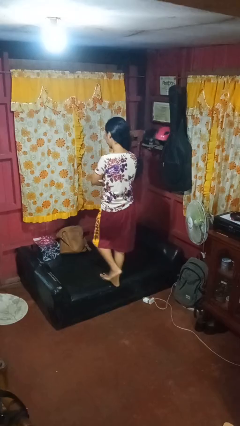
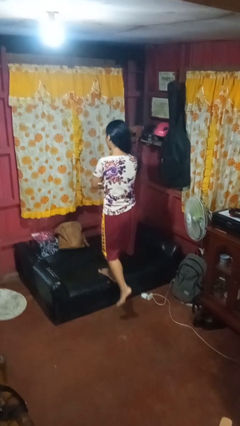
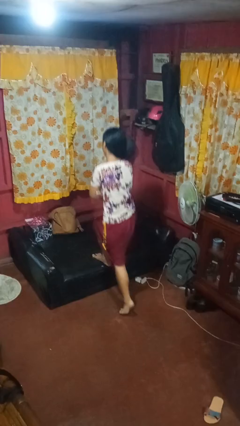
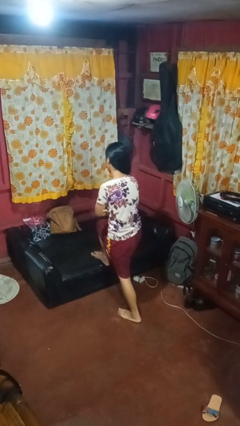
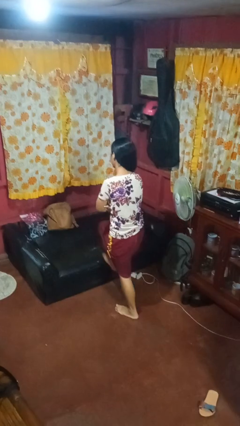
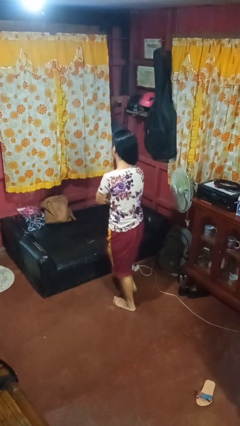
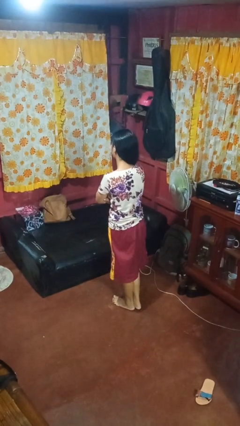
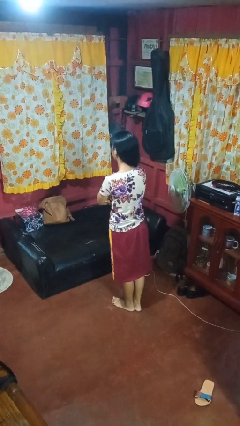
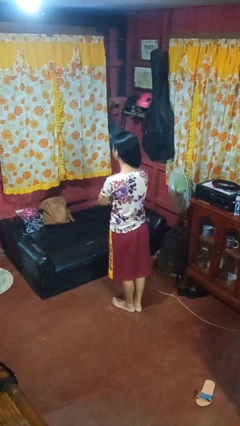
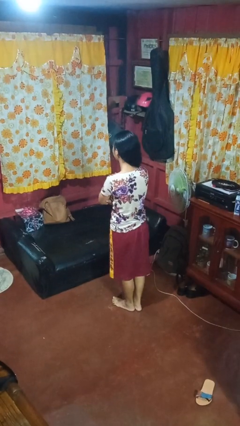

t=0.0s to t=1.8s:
person climbs off couch

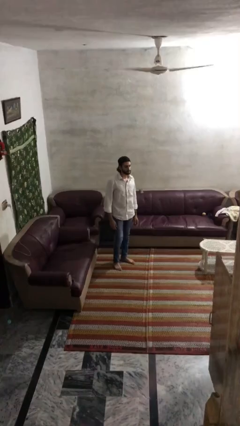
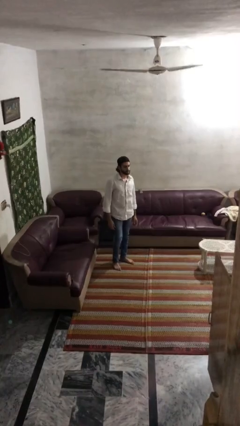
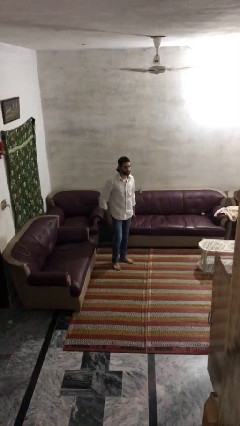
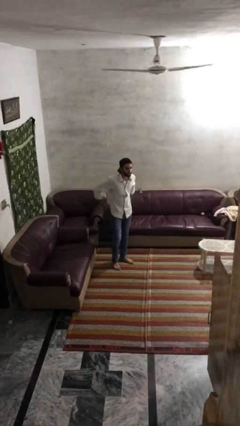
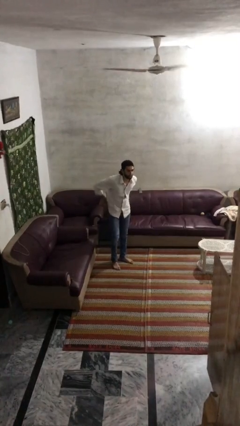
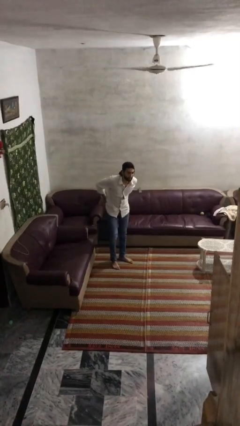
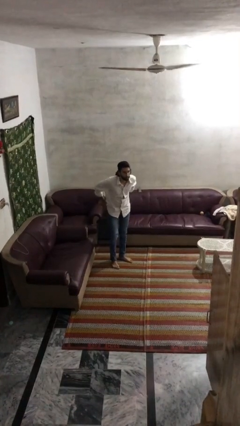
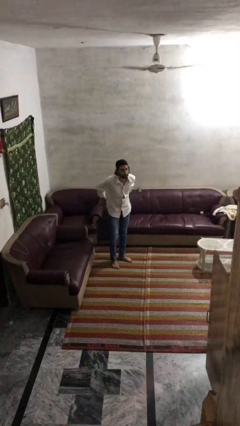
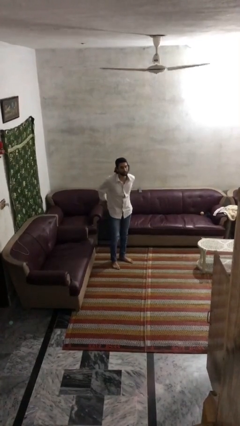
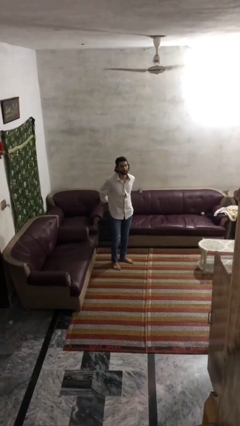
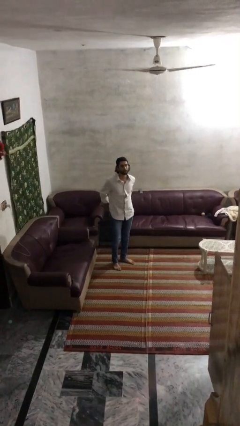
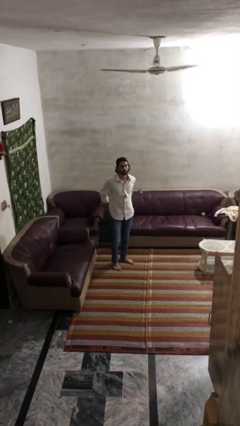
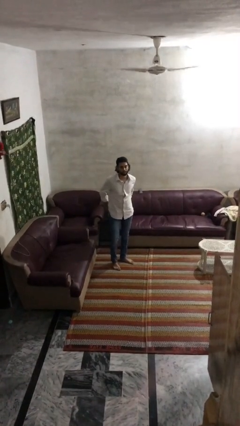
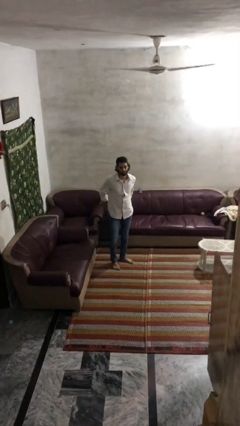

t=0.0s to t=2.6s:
person puts hands in back pockets

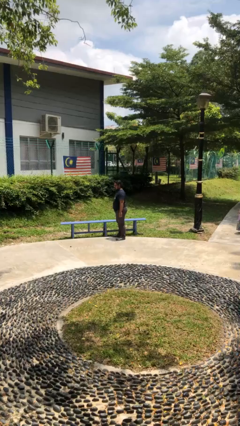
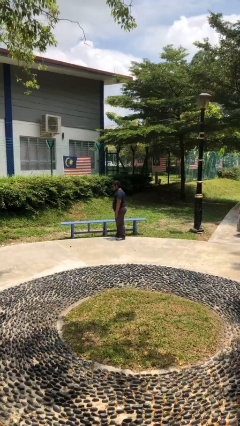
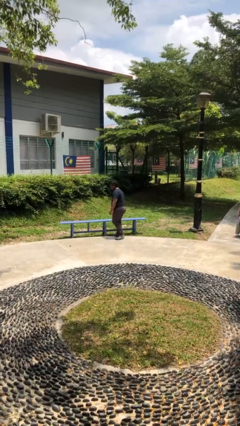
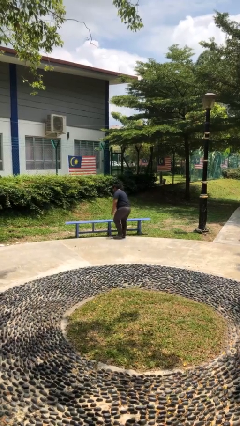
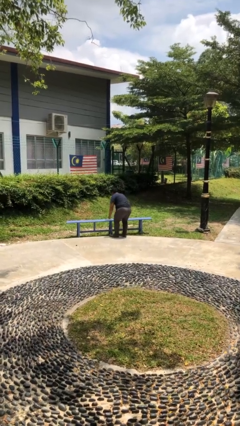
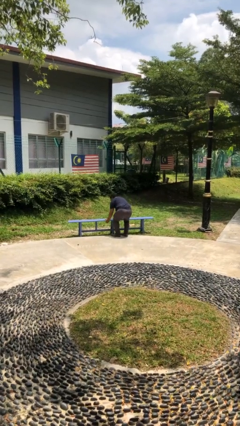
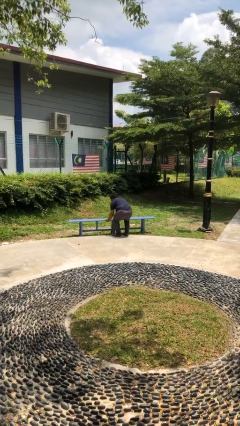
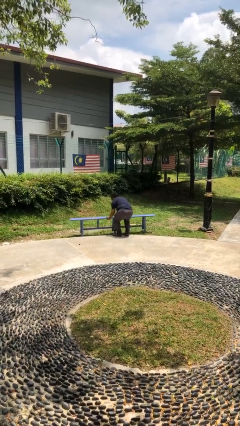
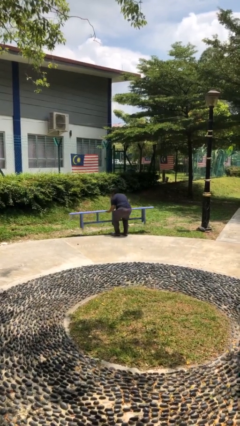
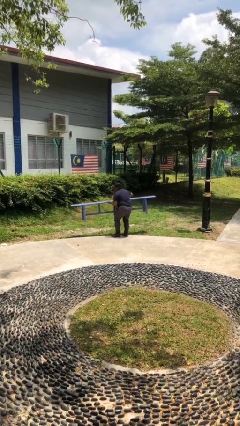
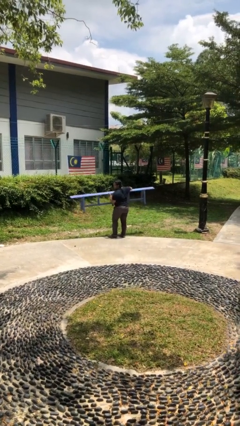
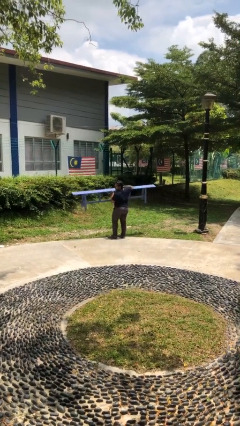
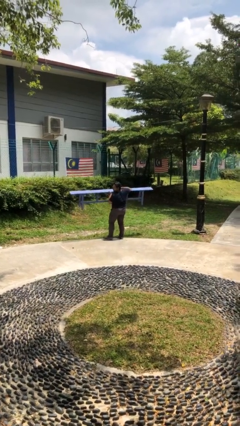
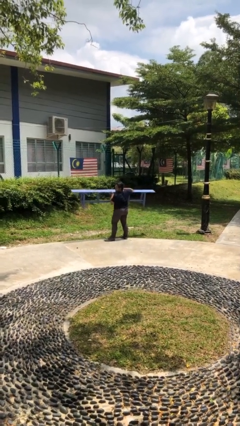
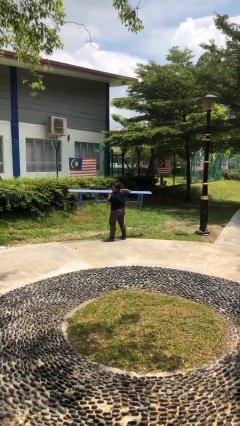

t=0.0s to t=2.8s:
person picks up object from floor

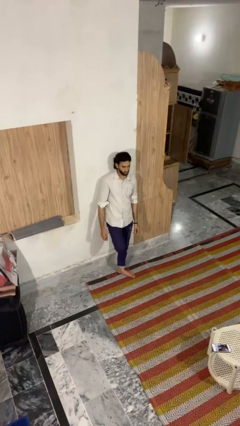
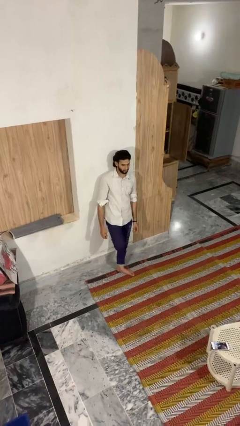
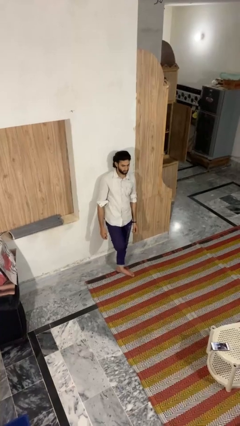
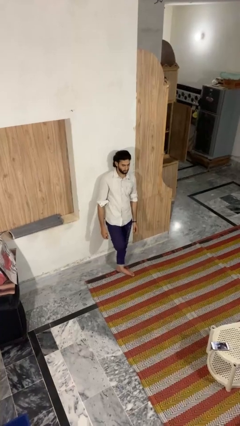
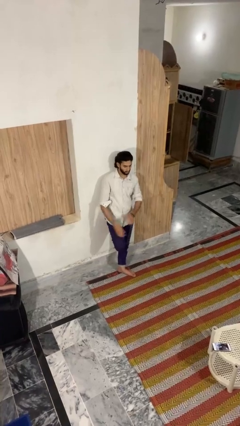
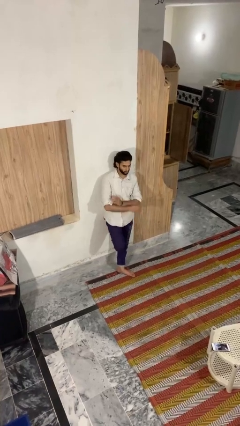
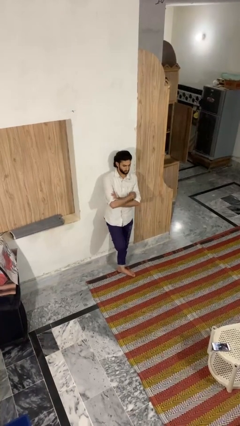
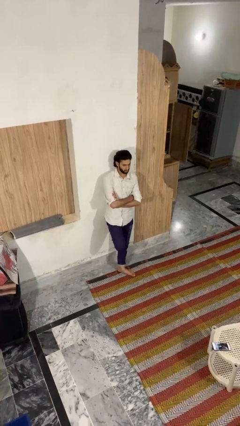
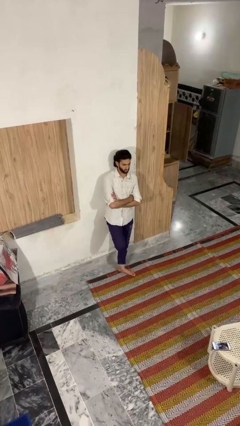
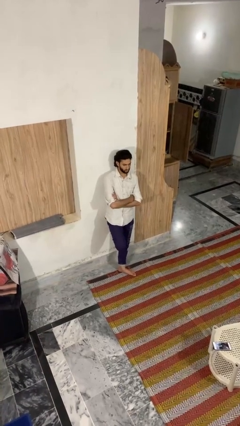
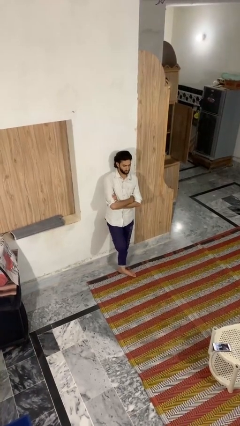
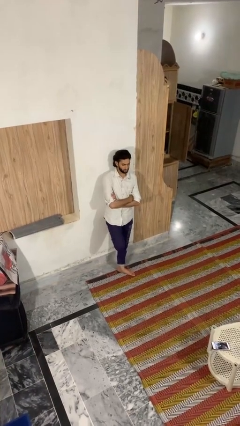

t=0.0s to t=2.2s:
person crosses arms

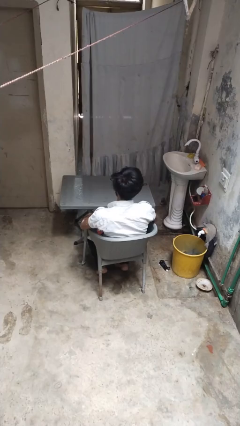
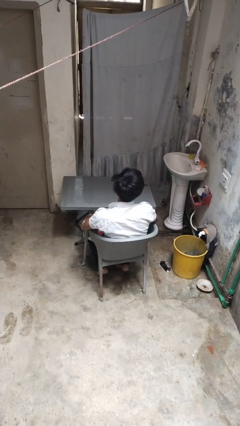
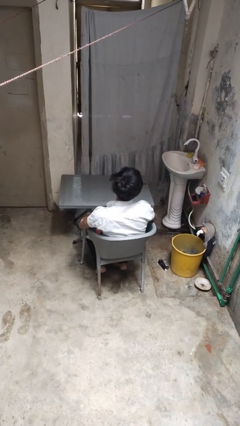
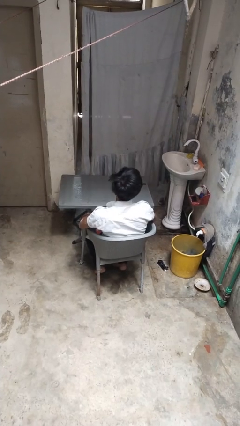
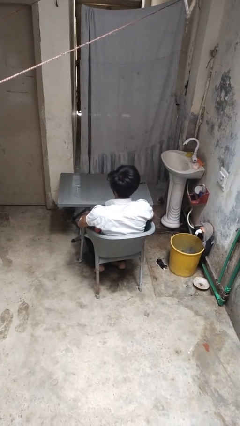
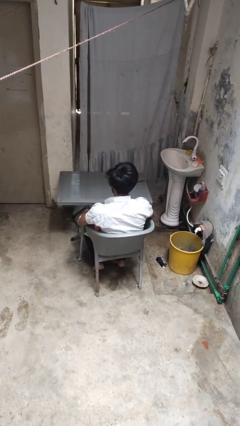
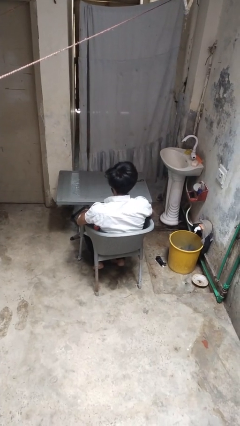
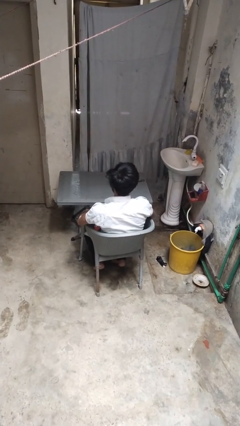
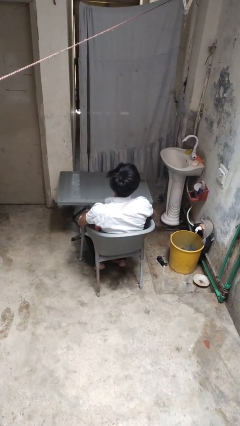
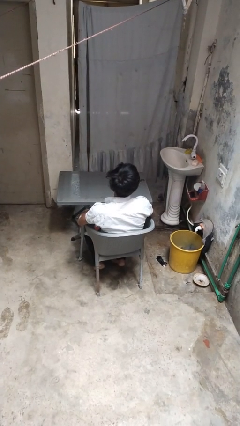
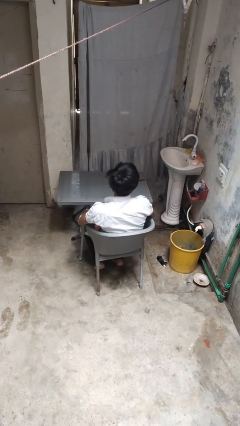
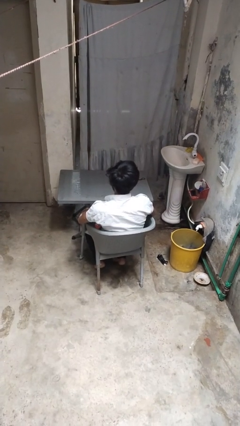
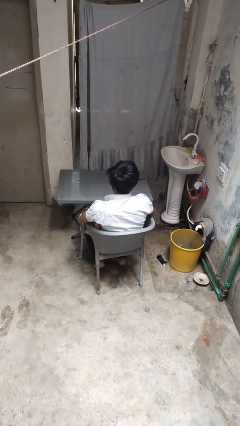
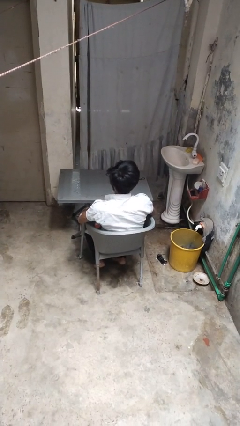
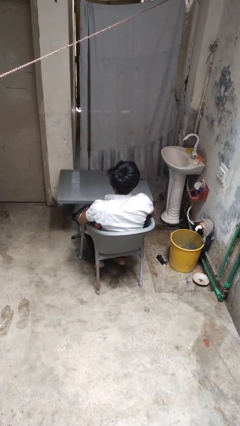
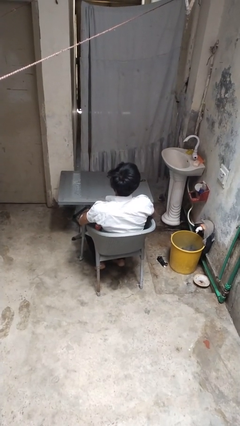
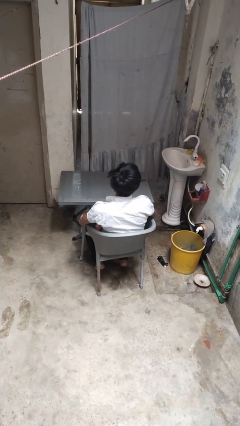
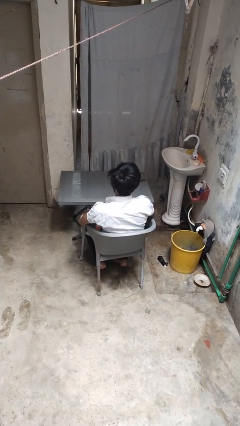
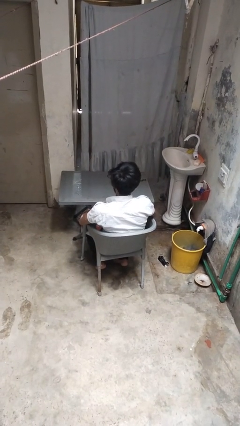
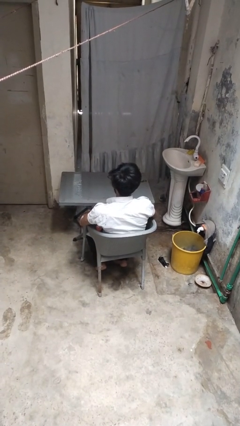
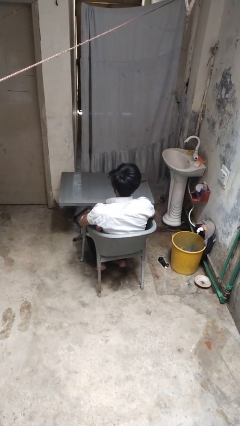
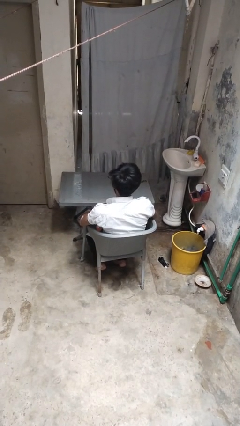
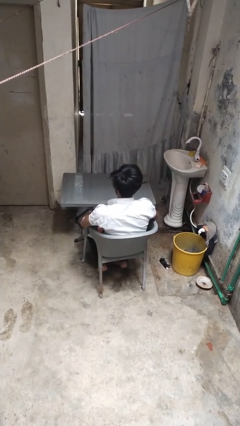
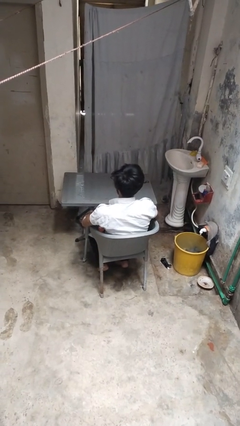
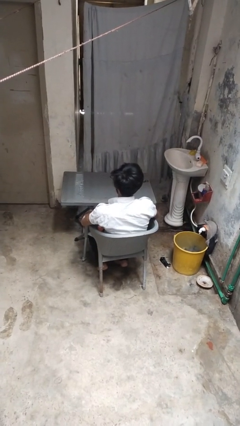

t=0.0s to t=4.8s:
person nods head

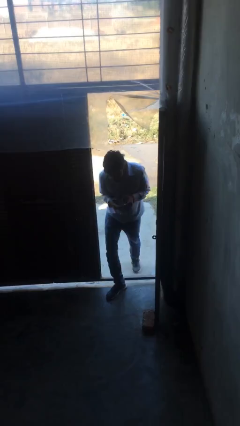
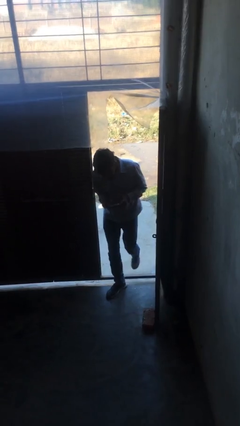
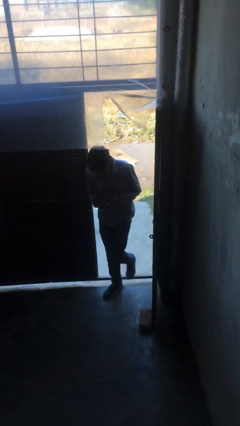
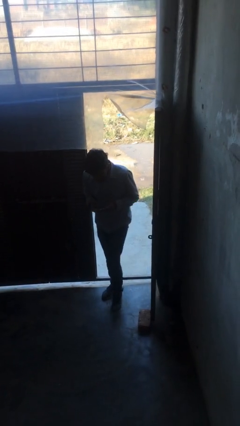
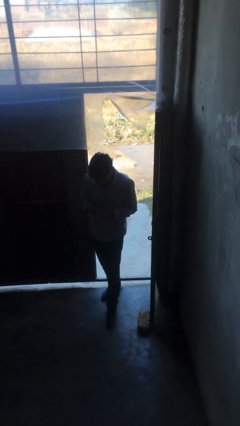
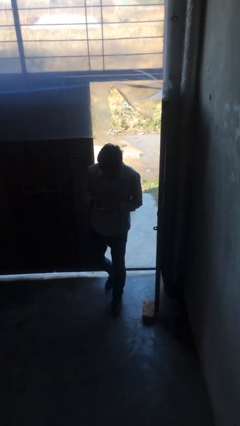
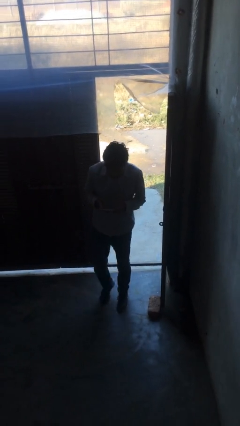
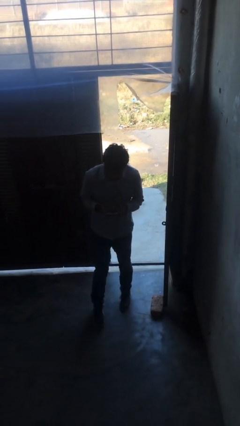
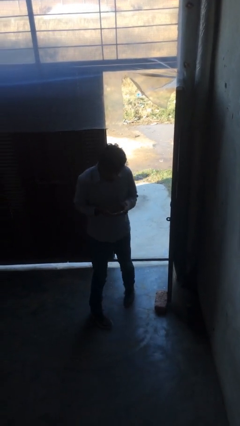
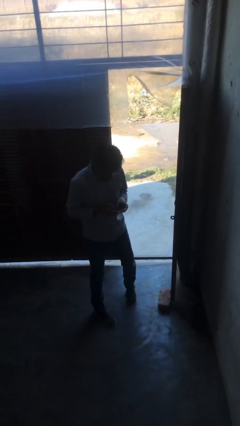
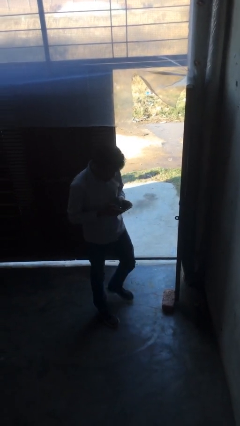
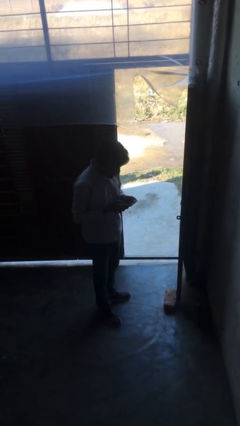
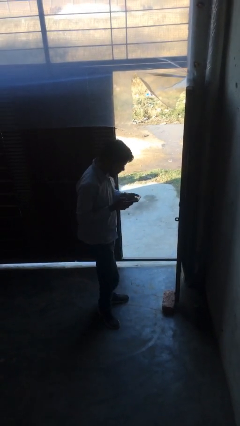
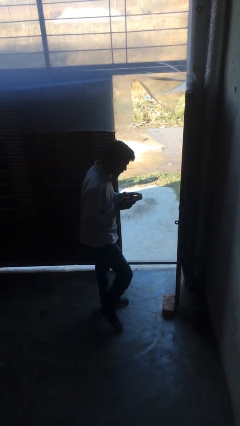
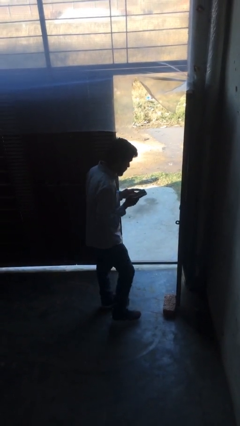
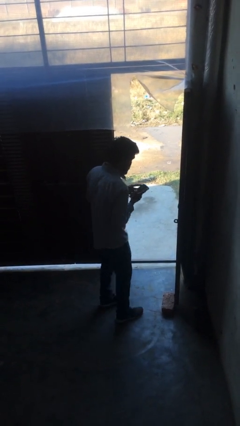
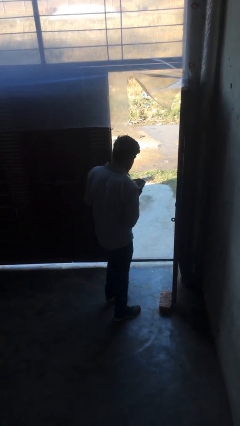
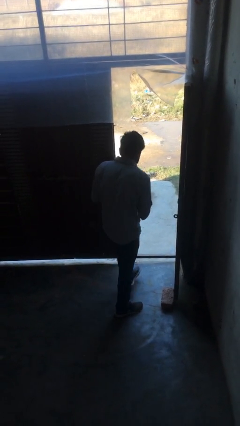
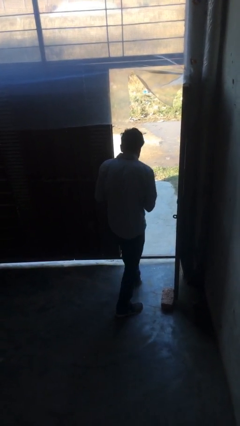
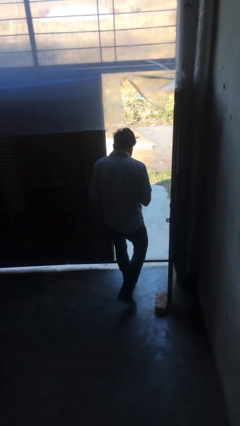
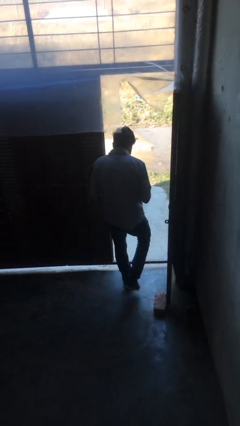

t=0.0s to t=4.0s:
person enters scene through structure
